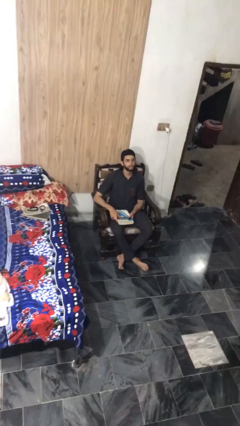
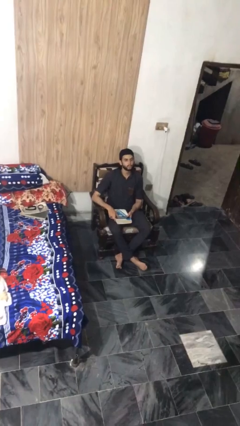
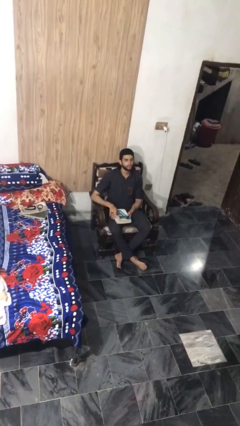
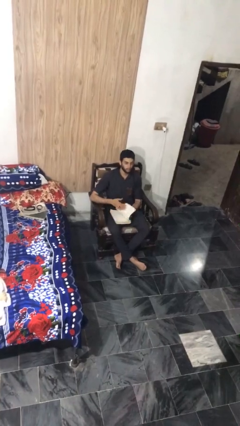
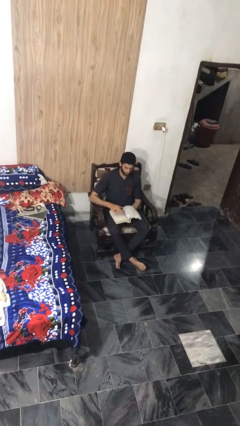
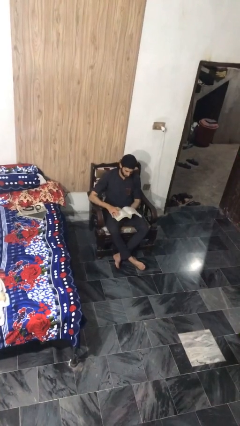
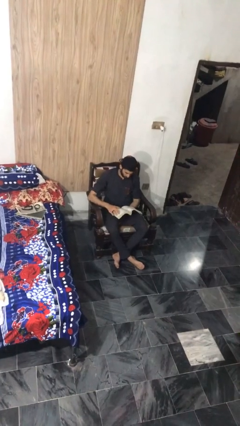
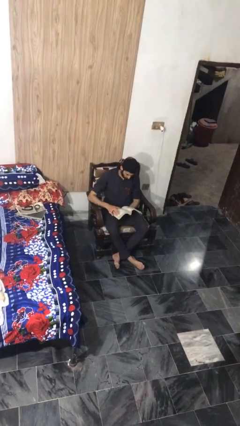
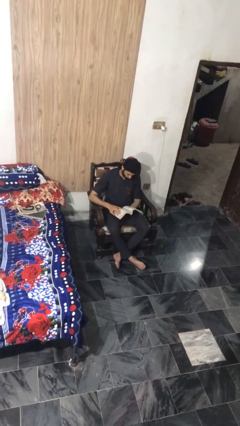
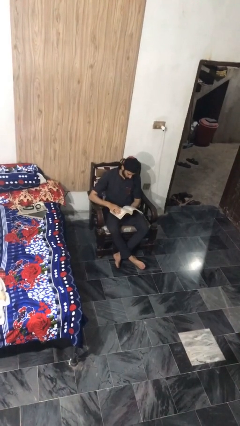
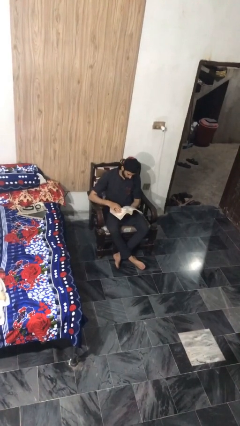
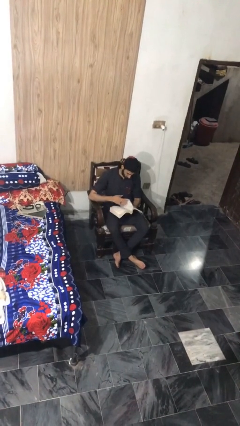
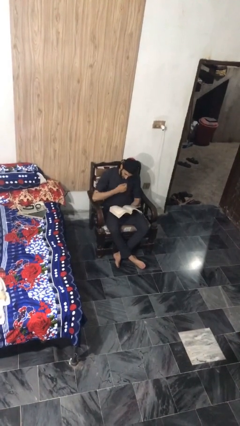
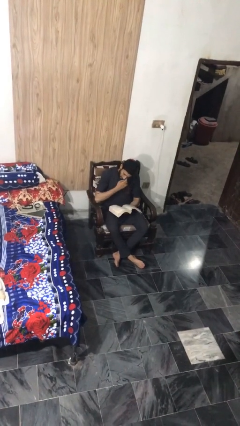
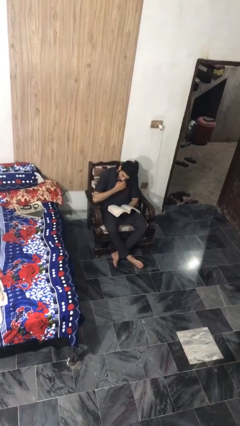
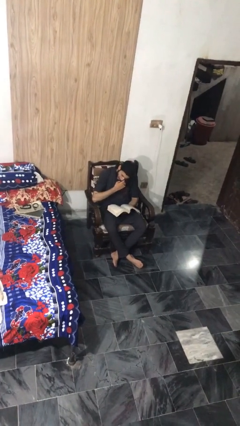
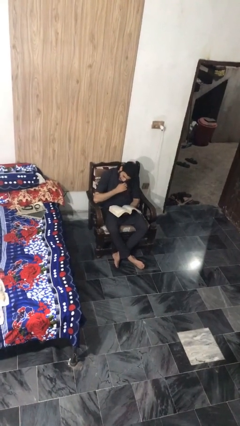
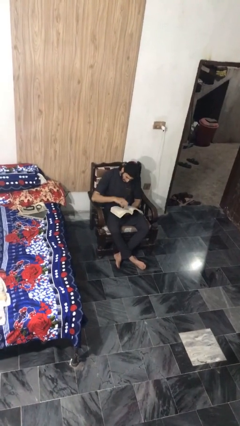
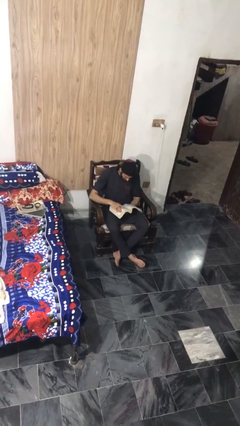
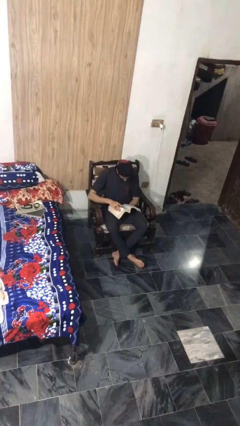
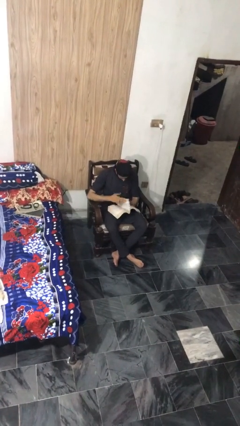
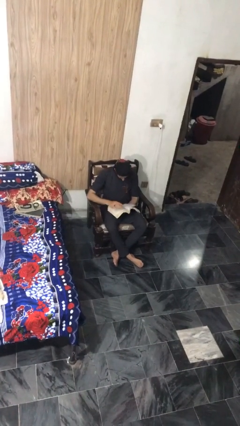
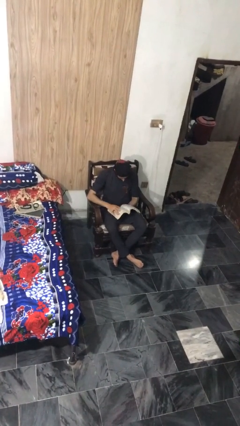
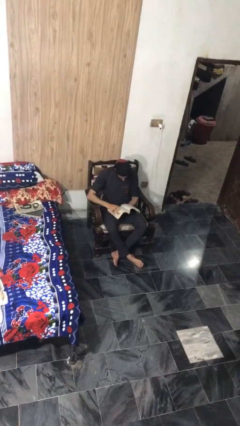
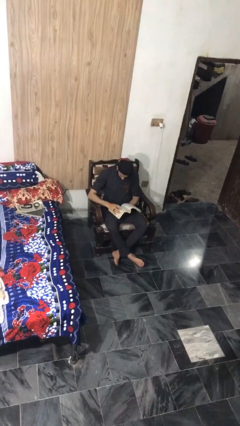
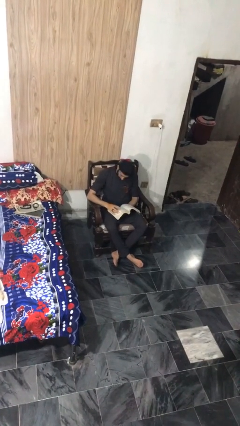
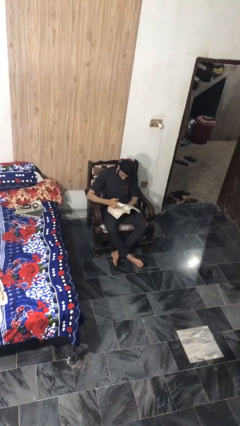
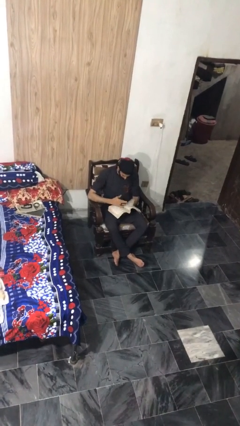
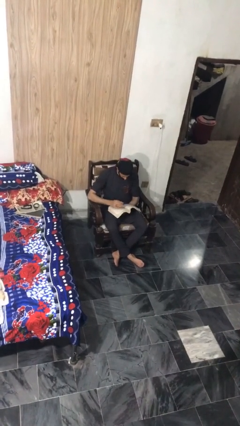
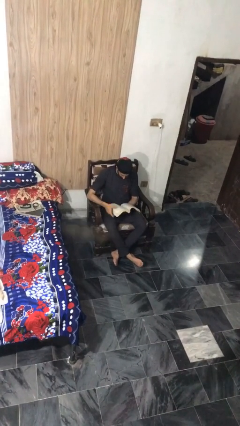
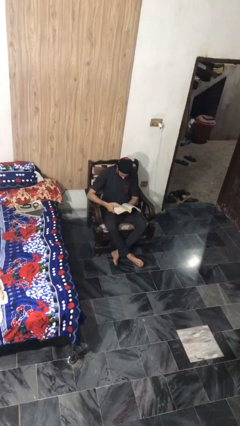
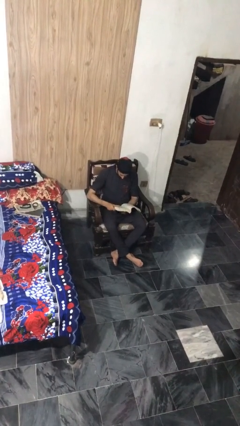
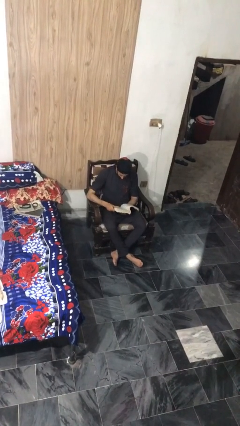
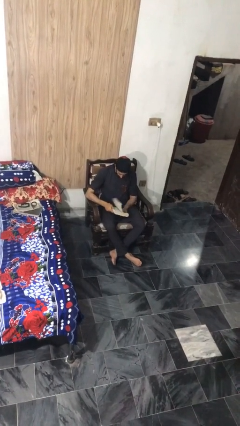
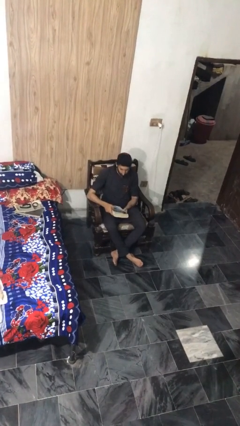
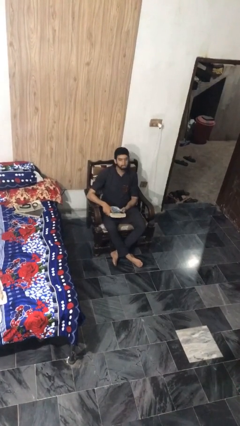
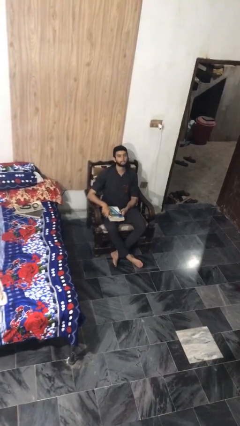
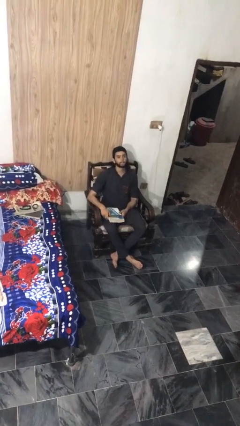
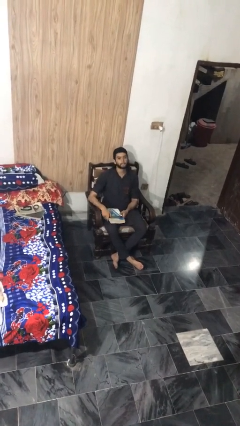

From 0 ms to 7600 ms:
person reads book

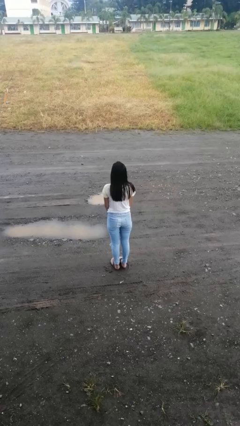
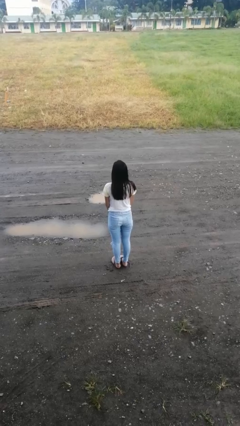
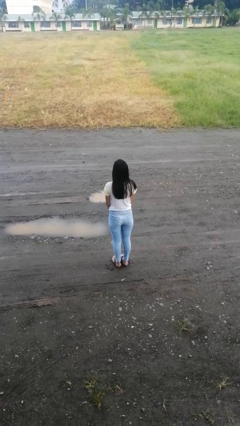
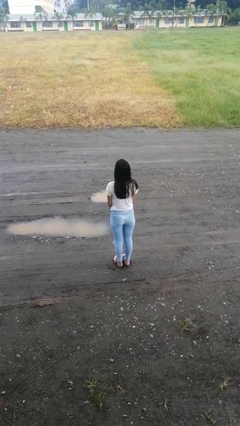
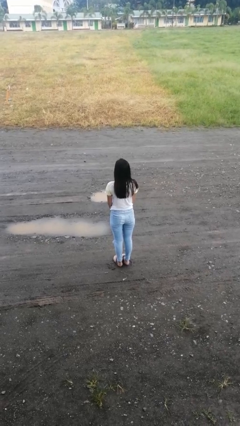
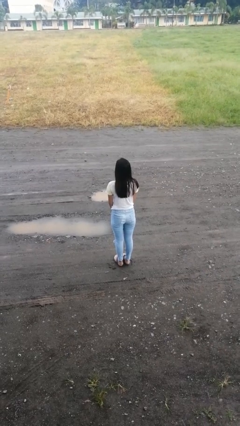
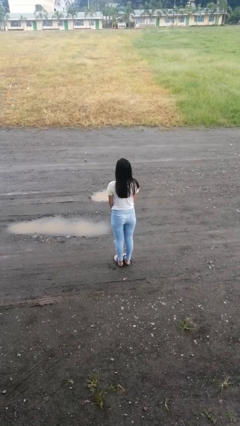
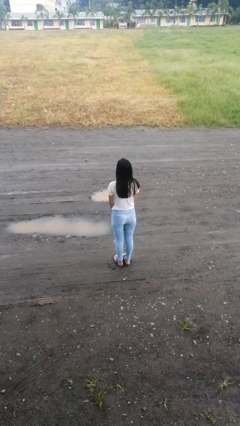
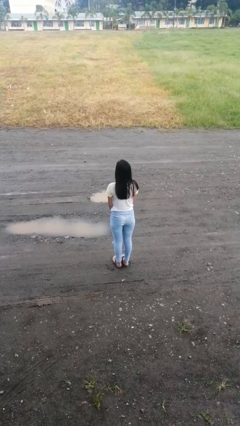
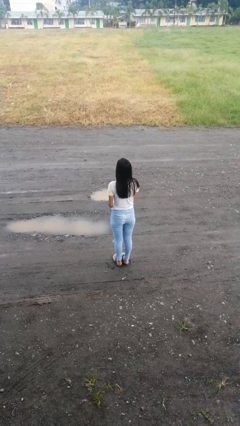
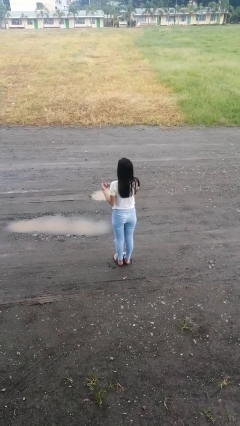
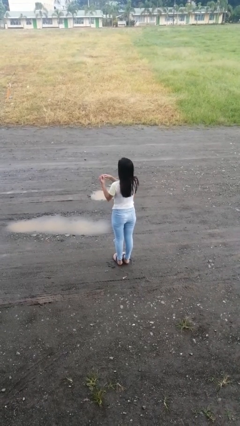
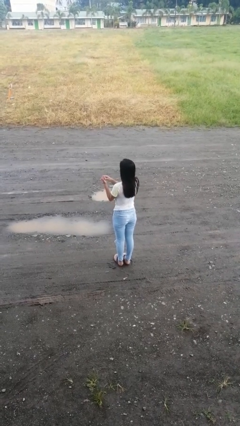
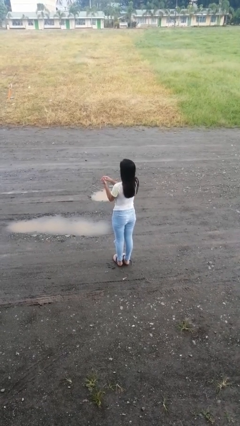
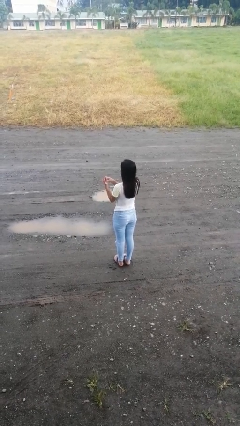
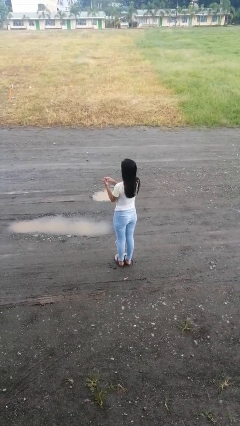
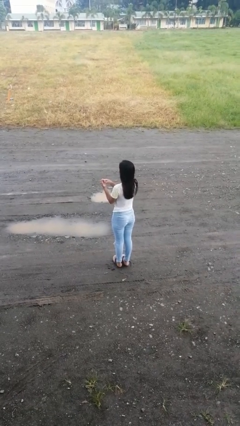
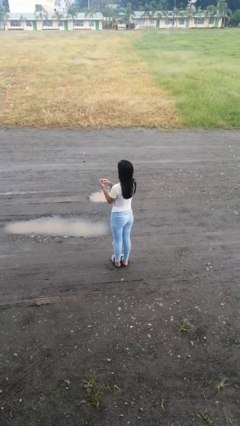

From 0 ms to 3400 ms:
person cracks knuckles

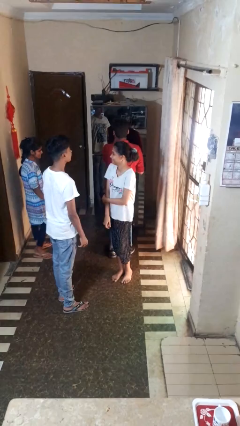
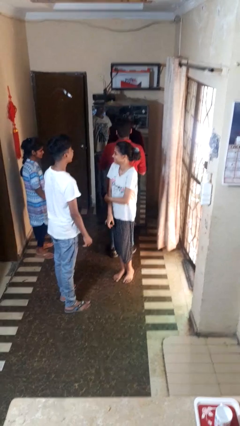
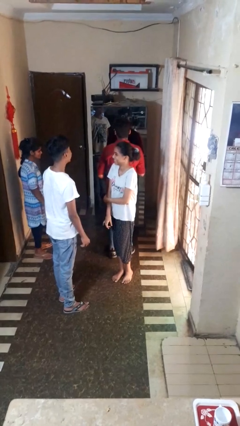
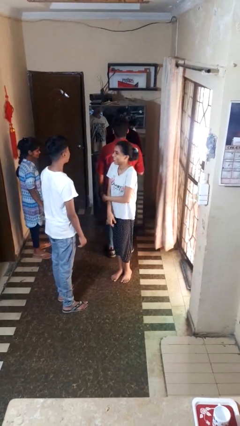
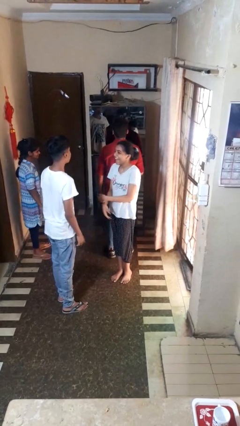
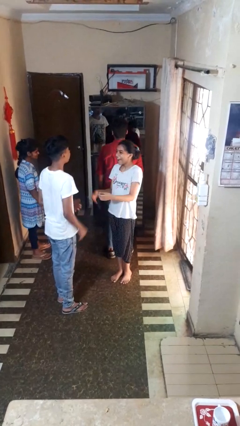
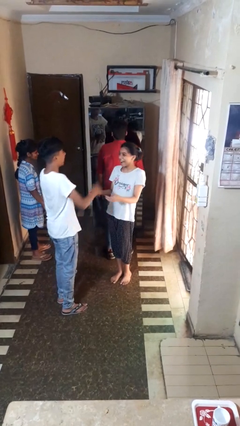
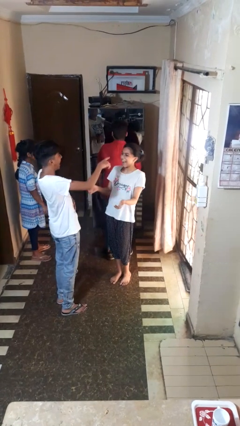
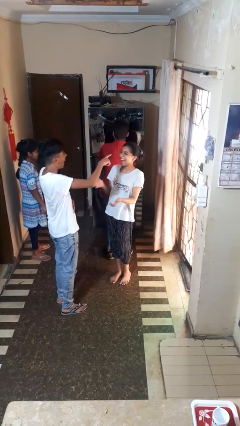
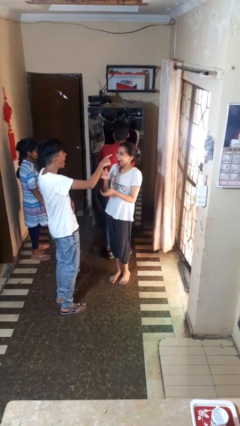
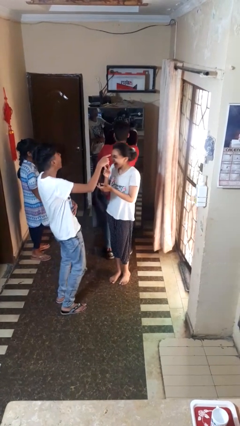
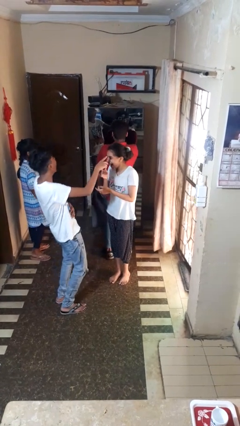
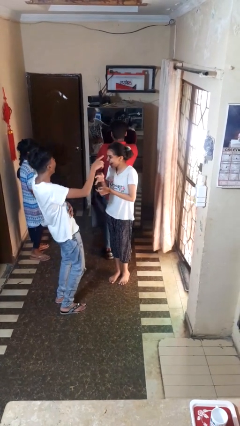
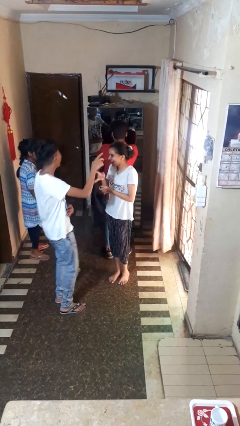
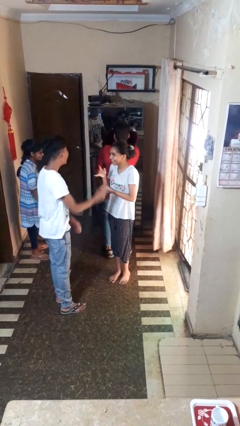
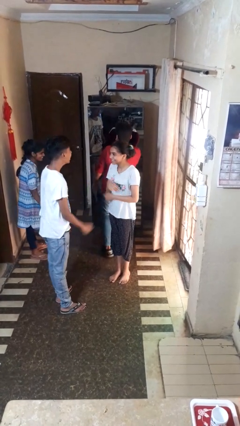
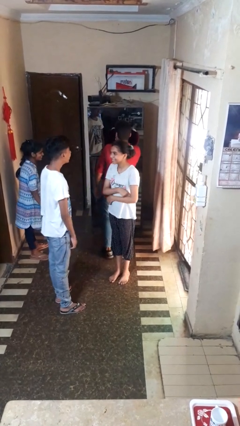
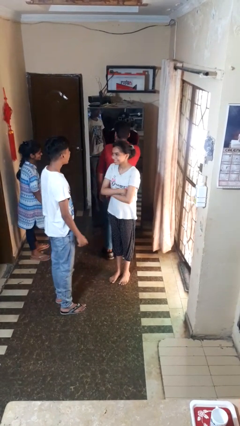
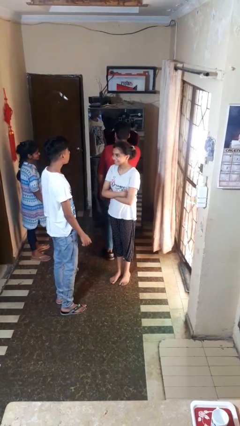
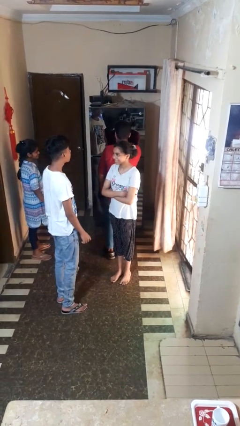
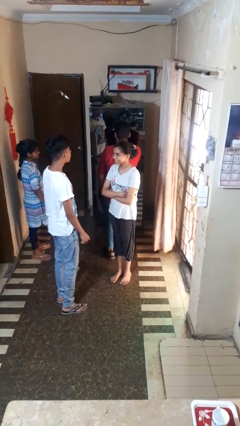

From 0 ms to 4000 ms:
person laughs with person

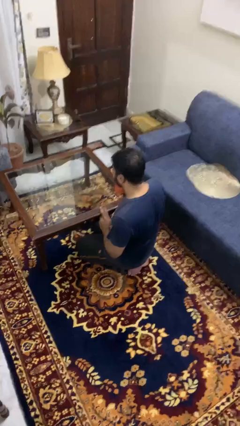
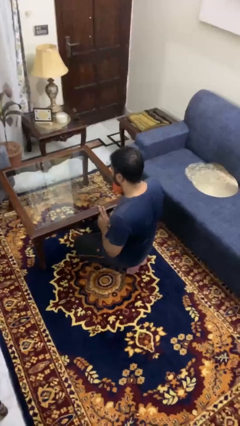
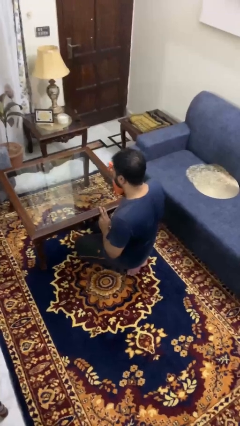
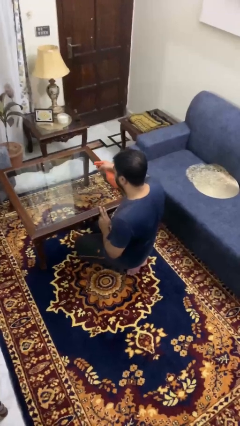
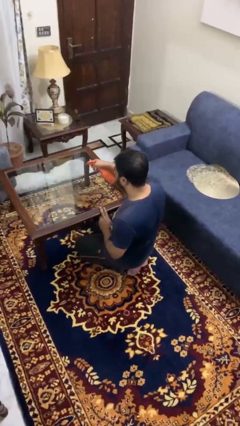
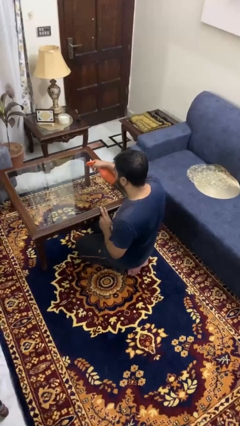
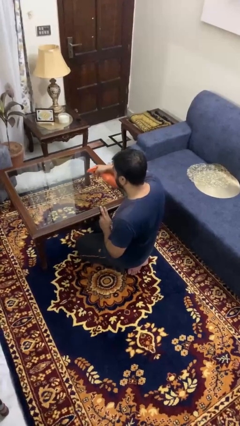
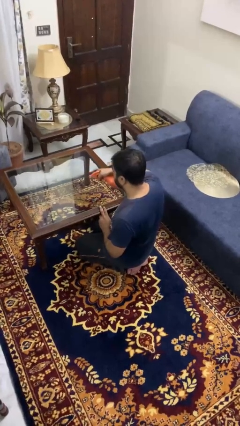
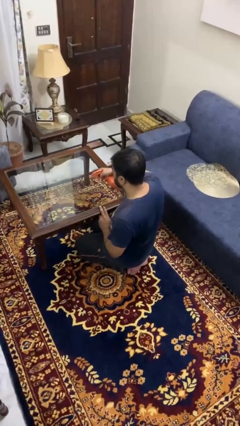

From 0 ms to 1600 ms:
person sprays from bottle

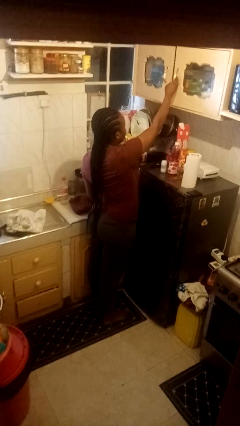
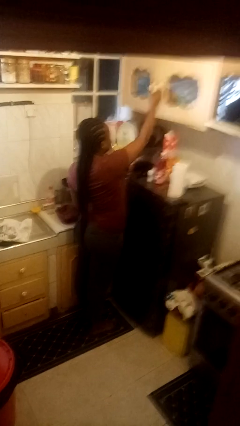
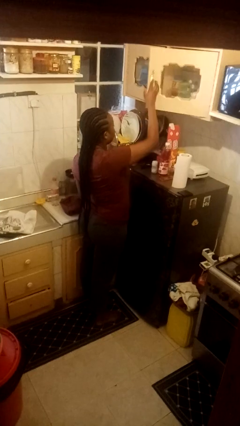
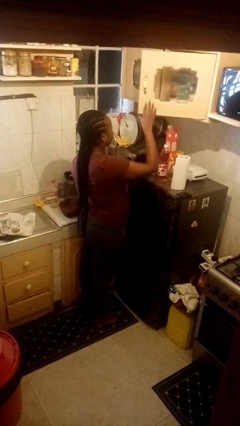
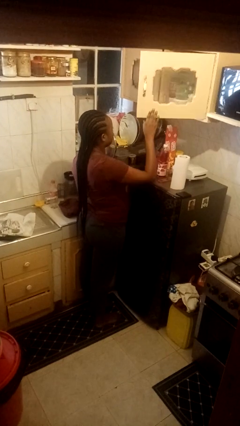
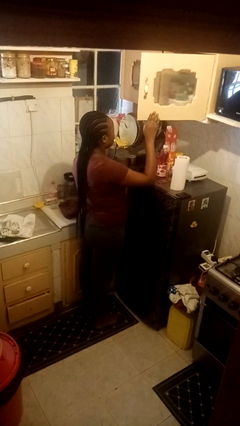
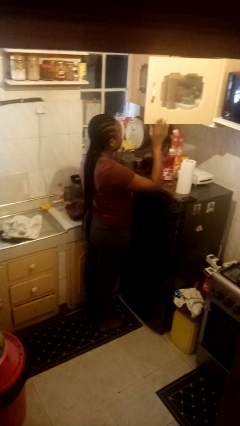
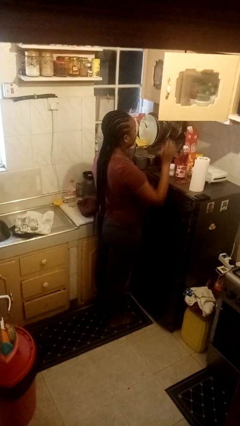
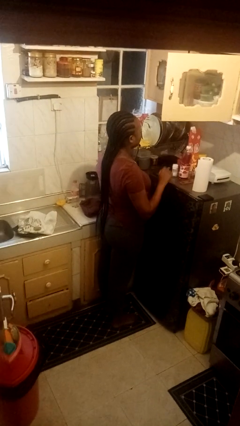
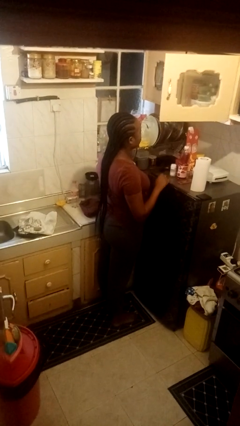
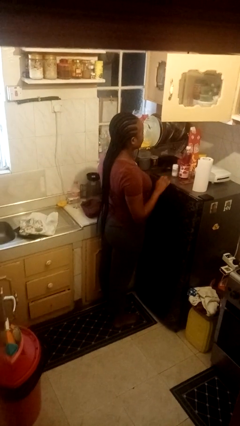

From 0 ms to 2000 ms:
person opens cabinet
